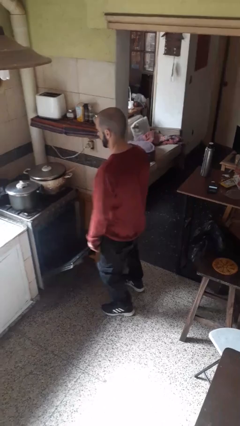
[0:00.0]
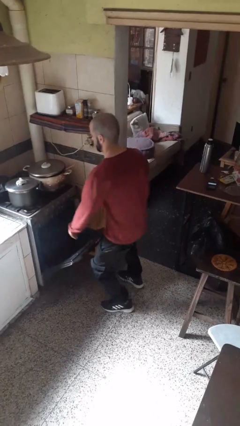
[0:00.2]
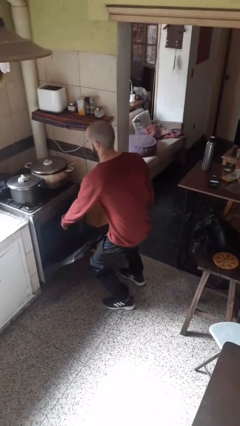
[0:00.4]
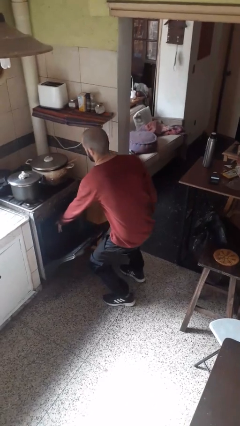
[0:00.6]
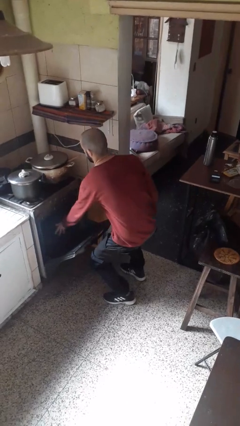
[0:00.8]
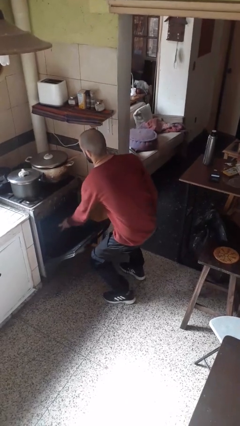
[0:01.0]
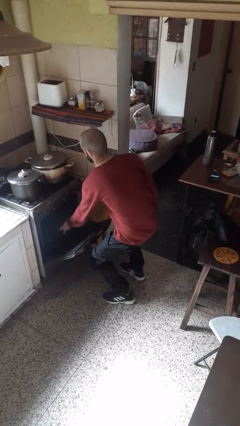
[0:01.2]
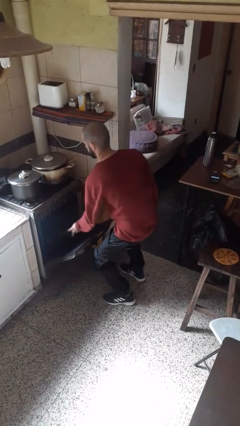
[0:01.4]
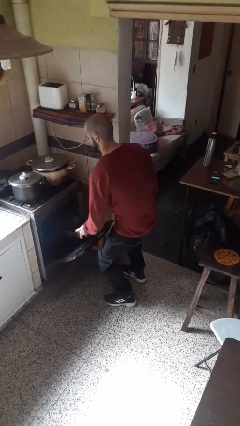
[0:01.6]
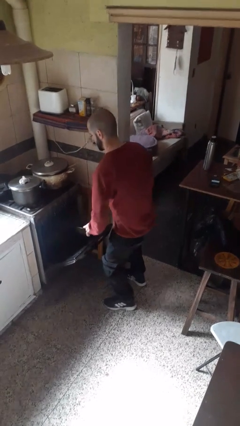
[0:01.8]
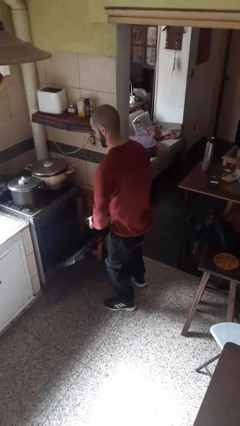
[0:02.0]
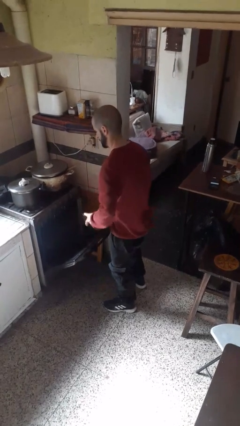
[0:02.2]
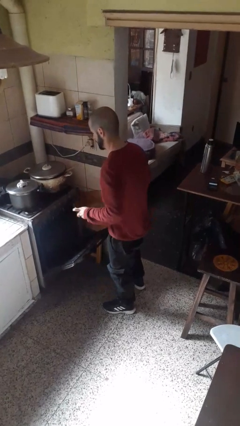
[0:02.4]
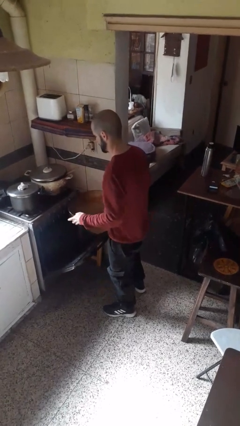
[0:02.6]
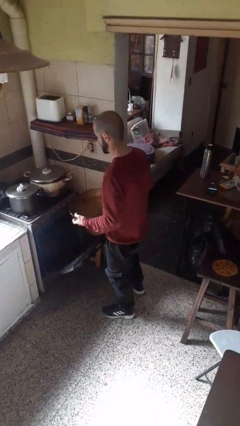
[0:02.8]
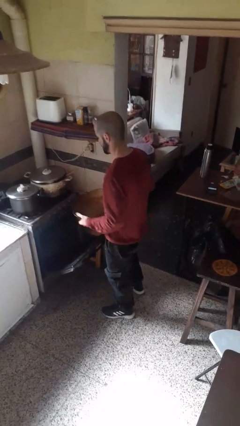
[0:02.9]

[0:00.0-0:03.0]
person takes object from oven

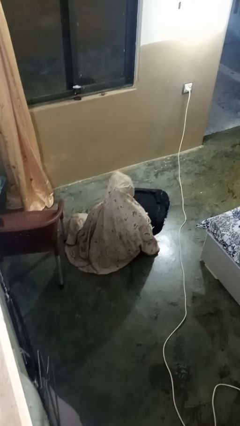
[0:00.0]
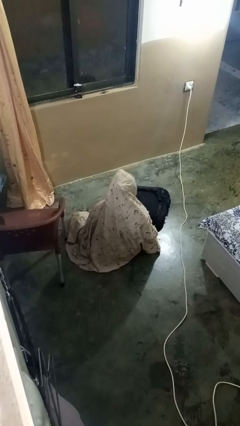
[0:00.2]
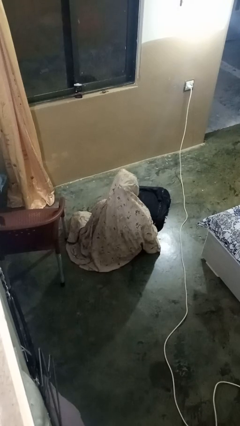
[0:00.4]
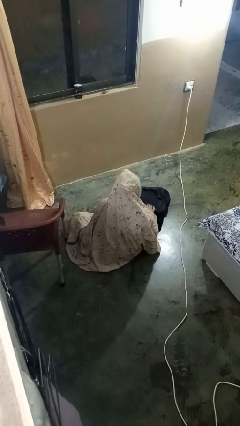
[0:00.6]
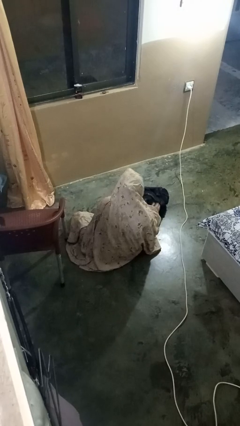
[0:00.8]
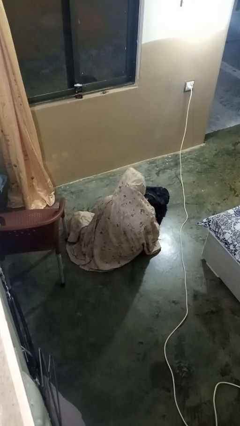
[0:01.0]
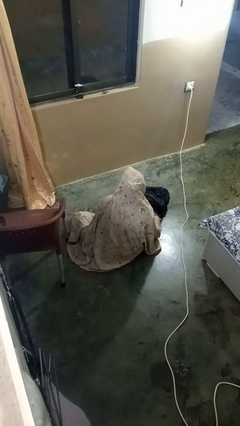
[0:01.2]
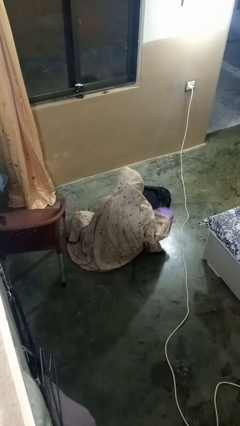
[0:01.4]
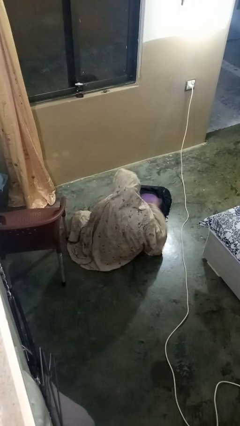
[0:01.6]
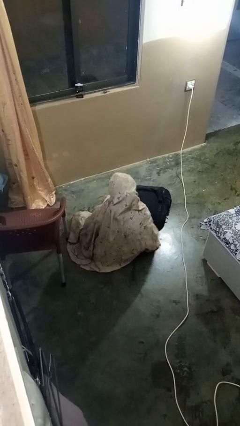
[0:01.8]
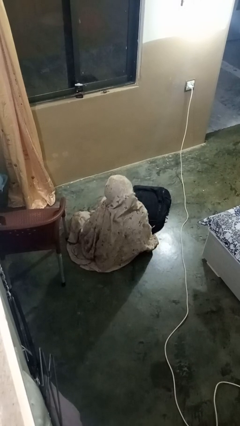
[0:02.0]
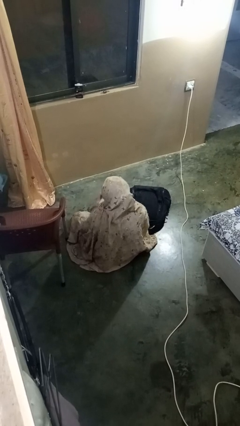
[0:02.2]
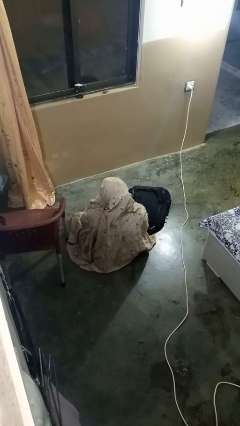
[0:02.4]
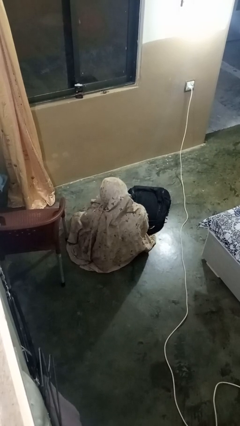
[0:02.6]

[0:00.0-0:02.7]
person eats snack from bag

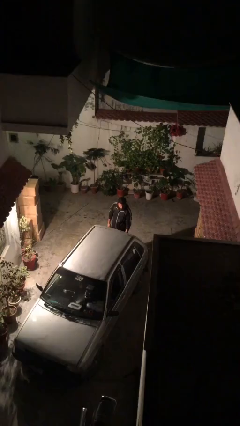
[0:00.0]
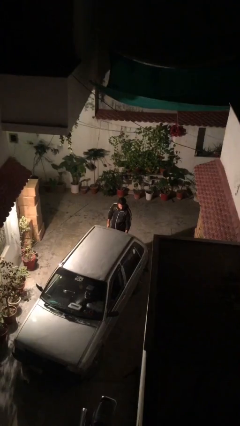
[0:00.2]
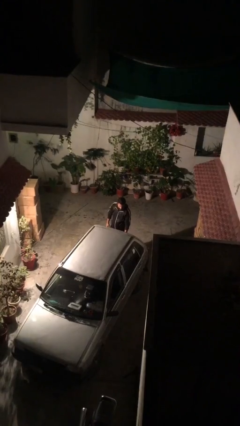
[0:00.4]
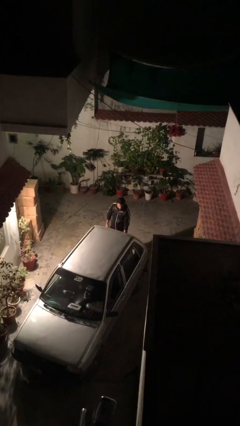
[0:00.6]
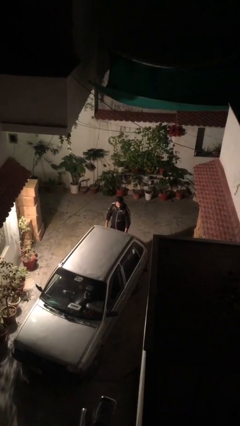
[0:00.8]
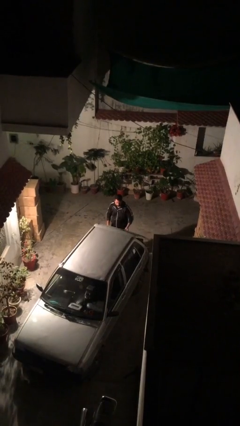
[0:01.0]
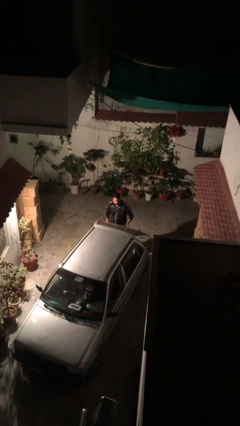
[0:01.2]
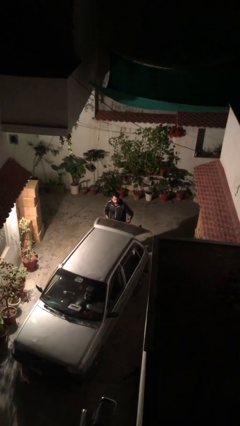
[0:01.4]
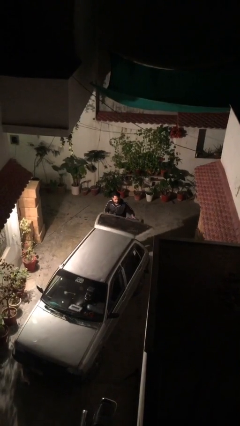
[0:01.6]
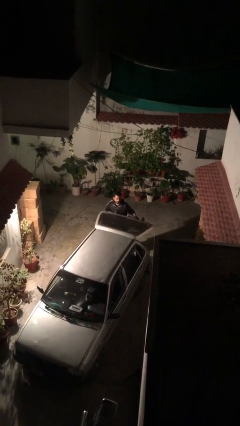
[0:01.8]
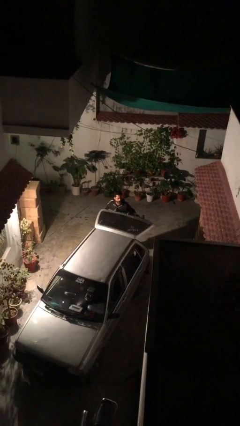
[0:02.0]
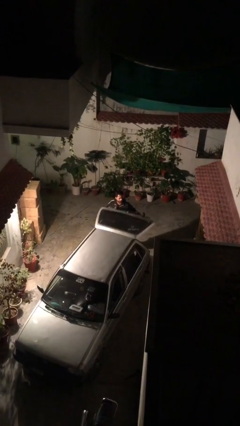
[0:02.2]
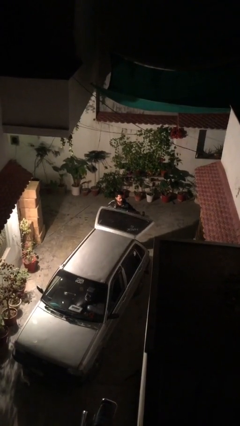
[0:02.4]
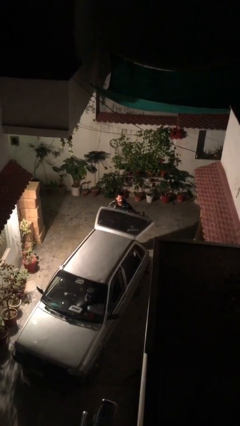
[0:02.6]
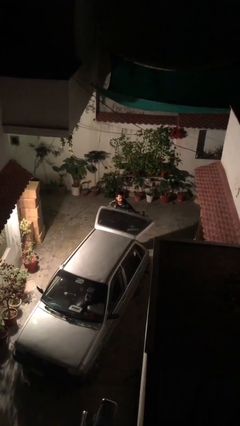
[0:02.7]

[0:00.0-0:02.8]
person opens car trunk

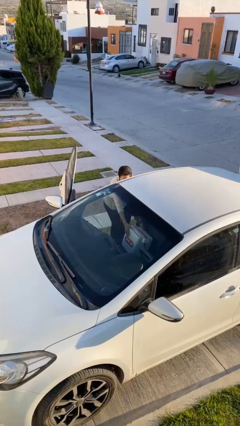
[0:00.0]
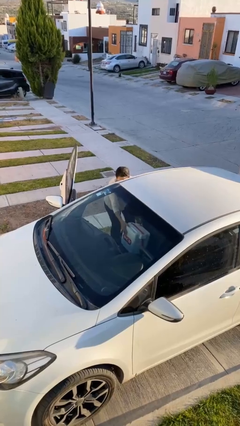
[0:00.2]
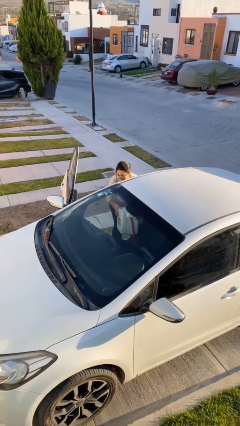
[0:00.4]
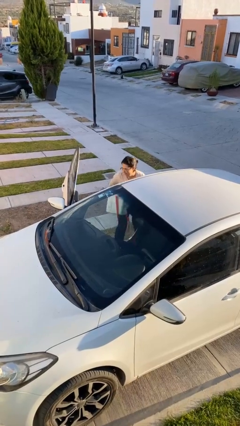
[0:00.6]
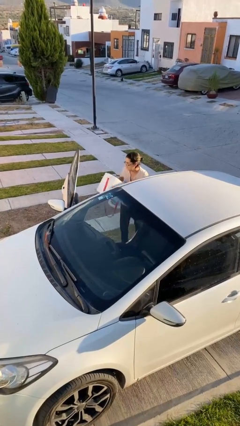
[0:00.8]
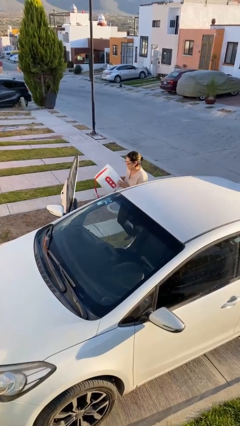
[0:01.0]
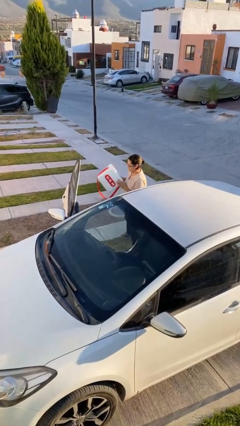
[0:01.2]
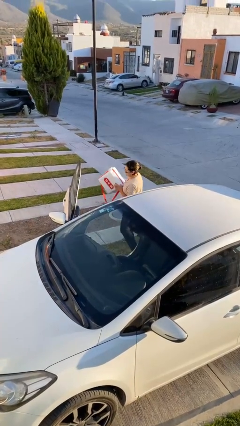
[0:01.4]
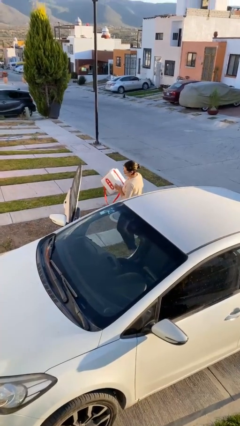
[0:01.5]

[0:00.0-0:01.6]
person unloads car

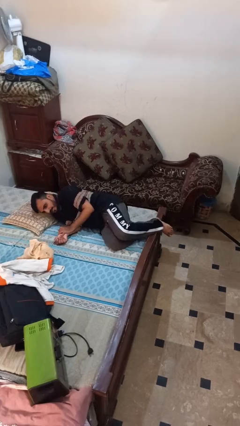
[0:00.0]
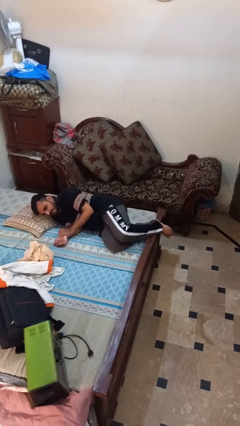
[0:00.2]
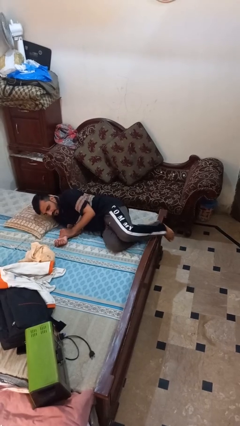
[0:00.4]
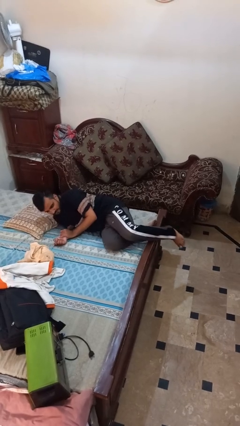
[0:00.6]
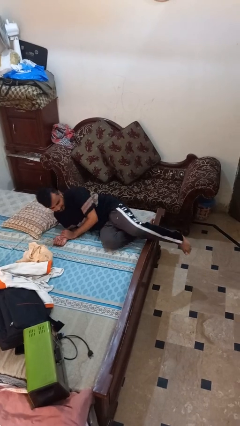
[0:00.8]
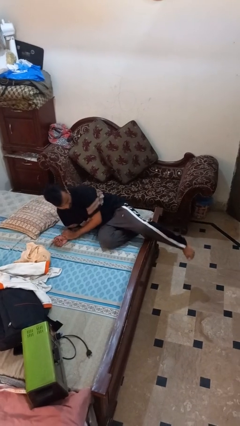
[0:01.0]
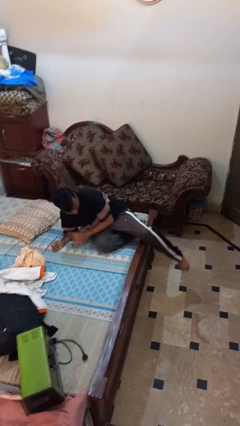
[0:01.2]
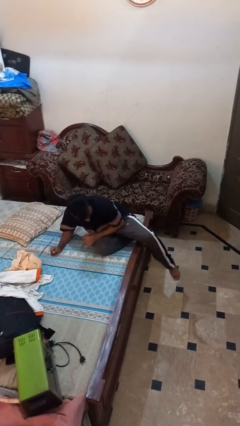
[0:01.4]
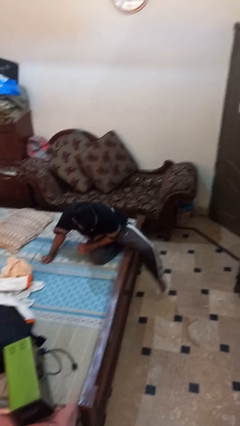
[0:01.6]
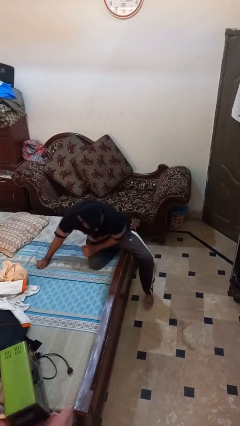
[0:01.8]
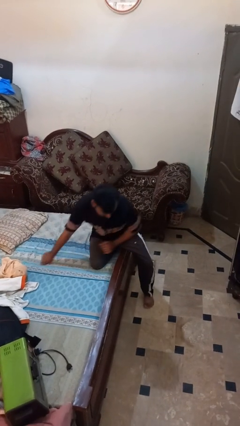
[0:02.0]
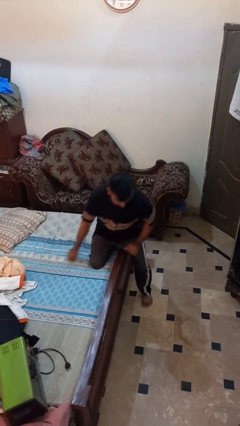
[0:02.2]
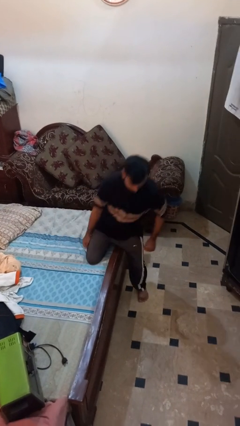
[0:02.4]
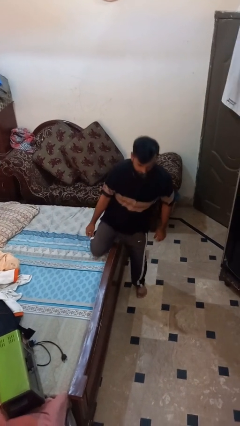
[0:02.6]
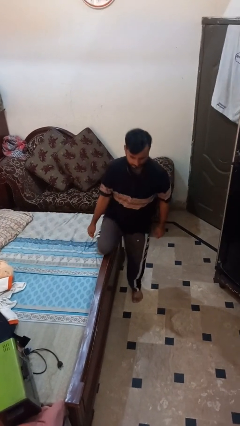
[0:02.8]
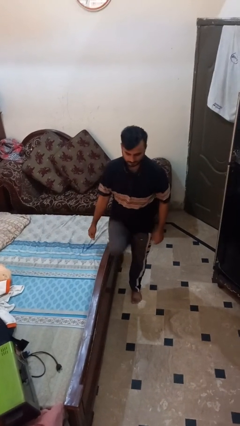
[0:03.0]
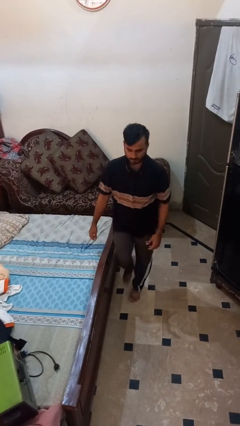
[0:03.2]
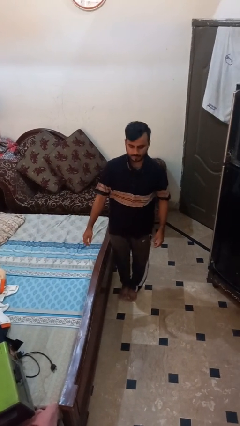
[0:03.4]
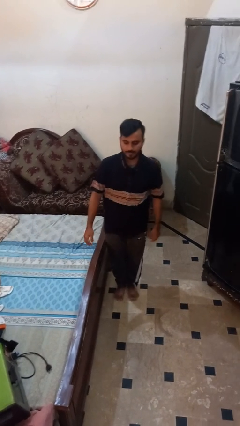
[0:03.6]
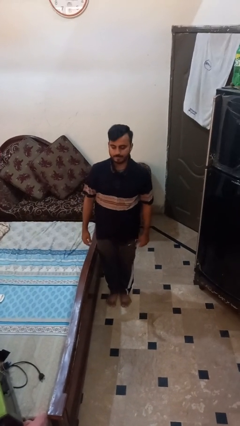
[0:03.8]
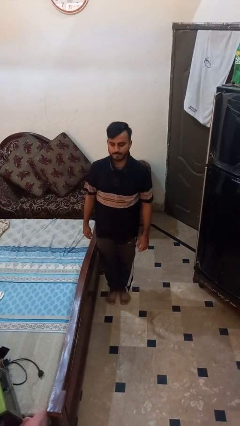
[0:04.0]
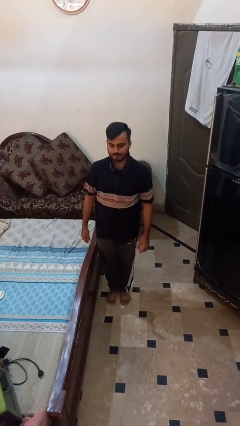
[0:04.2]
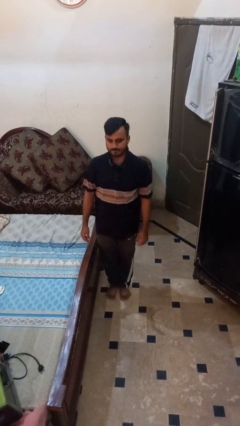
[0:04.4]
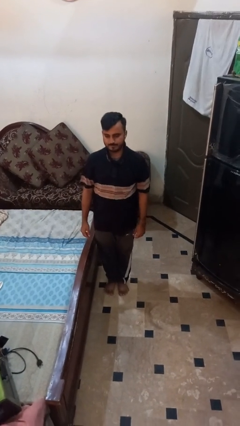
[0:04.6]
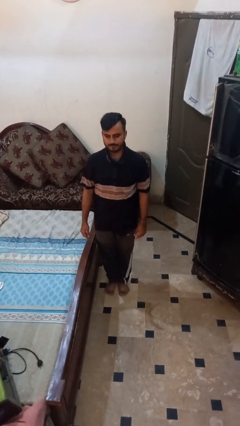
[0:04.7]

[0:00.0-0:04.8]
person stands up

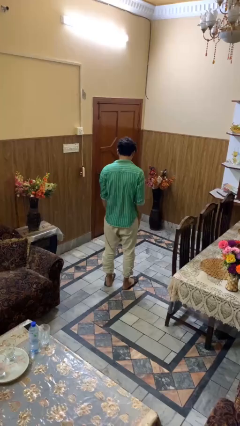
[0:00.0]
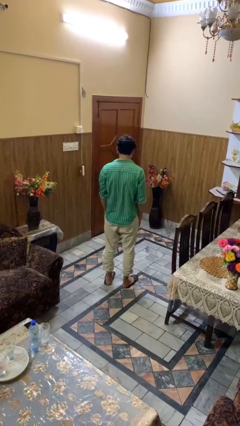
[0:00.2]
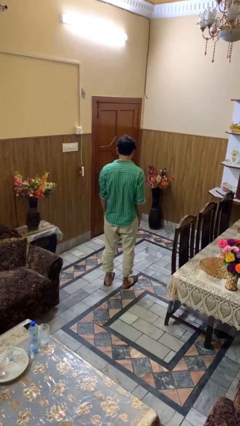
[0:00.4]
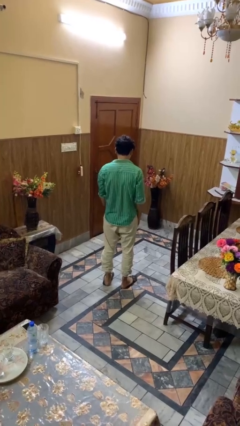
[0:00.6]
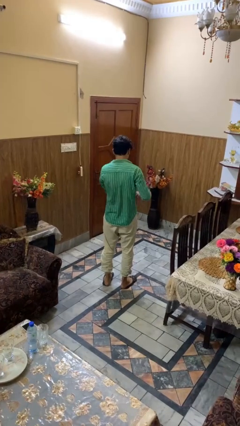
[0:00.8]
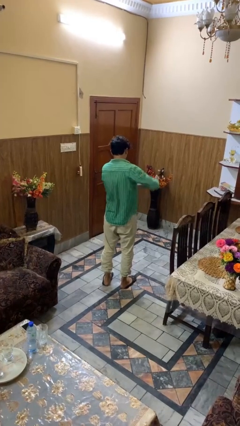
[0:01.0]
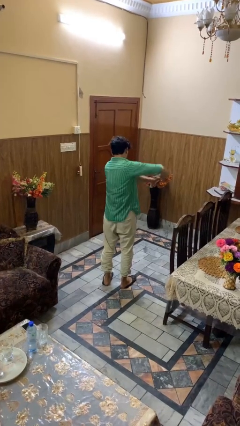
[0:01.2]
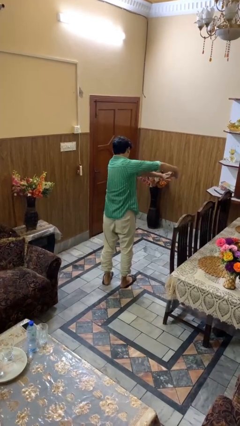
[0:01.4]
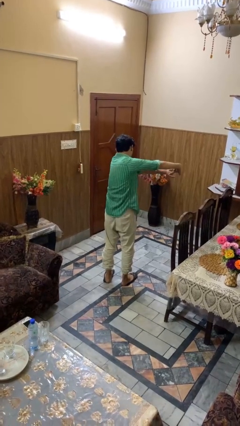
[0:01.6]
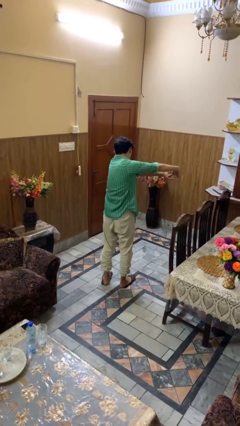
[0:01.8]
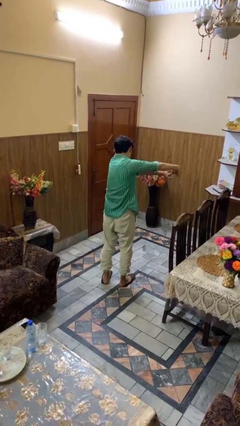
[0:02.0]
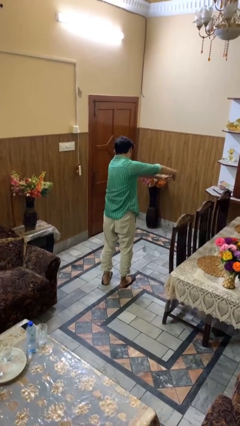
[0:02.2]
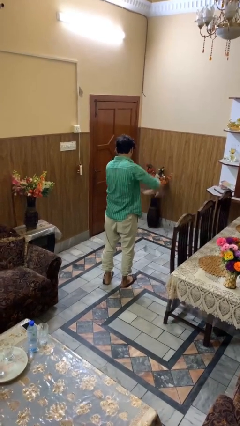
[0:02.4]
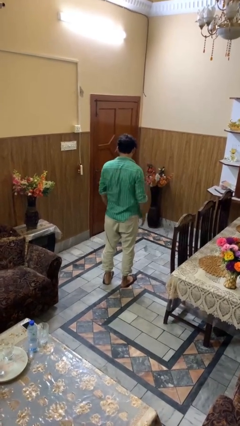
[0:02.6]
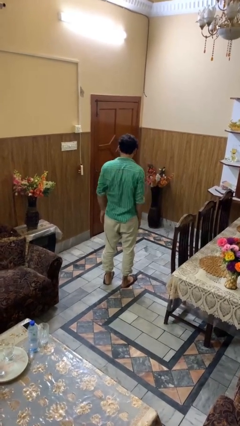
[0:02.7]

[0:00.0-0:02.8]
person stretches arms to side
